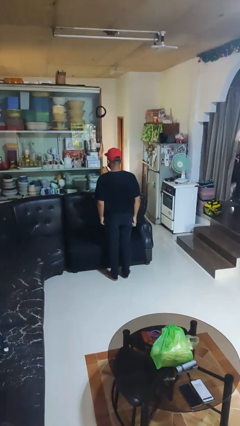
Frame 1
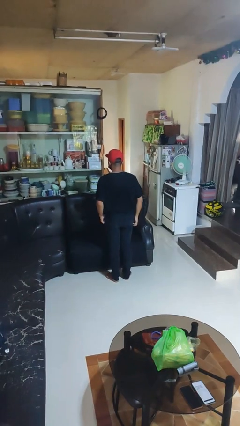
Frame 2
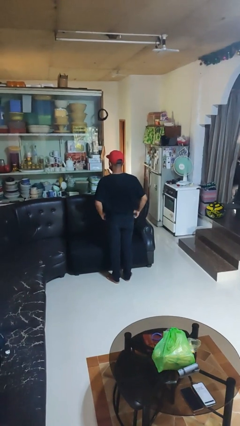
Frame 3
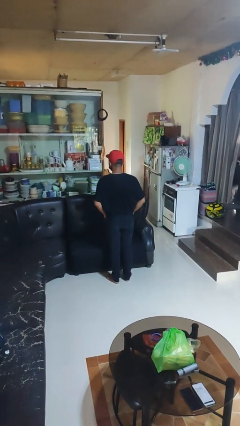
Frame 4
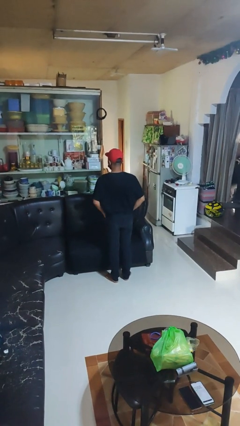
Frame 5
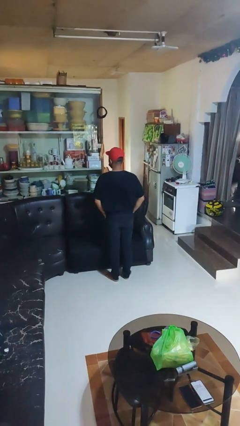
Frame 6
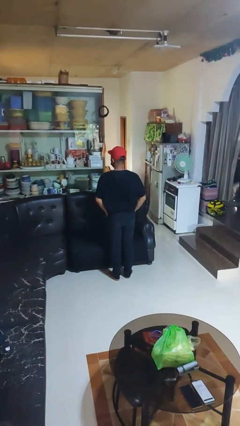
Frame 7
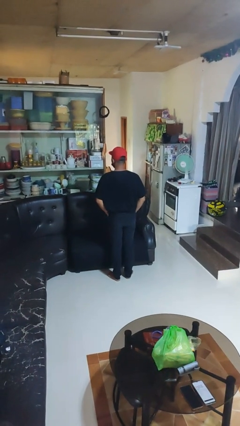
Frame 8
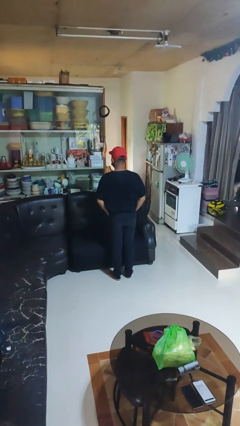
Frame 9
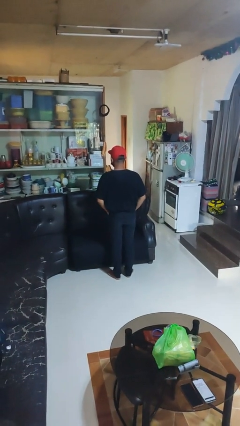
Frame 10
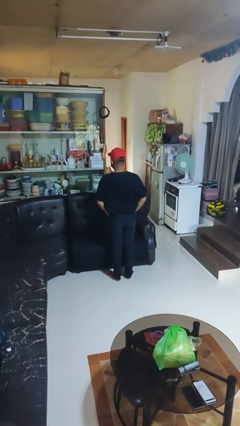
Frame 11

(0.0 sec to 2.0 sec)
person puts hands in back pockets

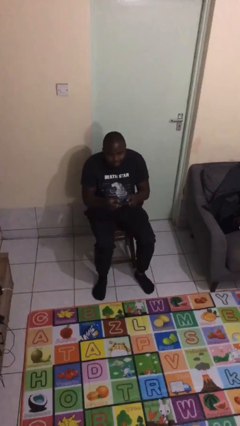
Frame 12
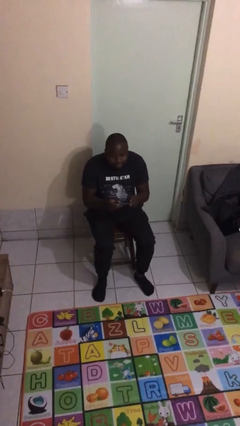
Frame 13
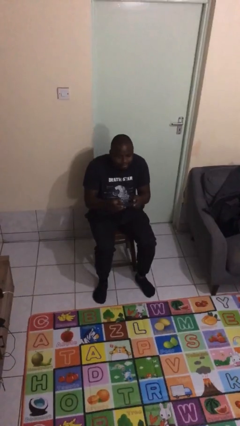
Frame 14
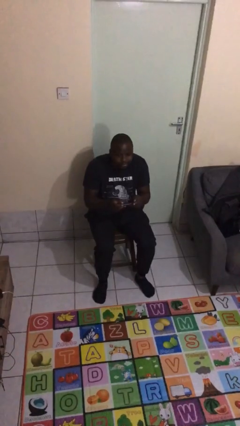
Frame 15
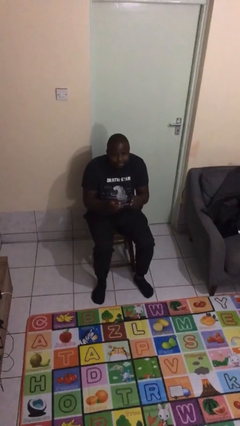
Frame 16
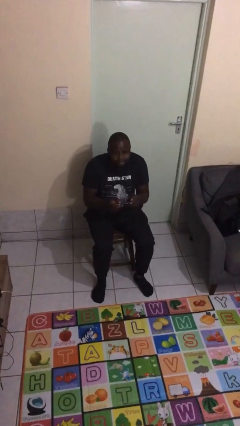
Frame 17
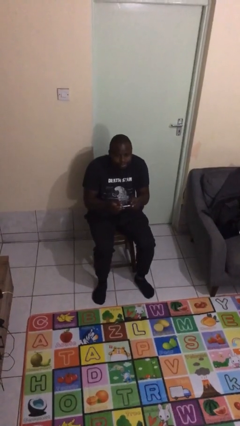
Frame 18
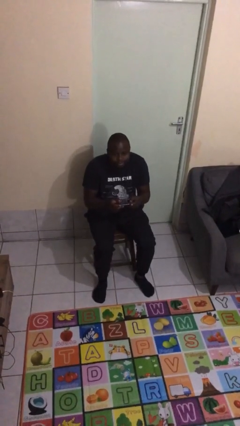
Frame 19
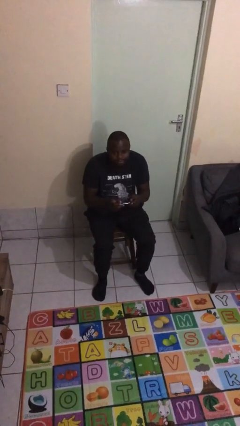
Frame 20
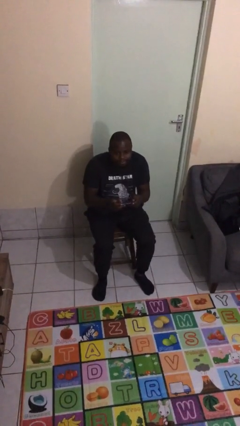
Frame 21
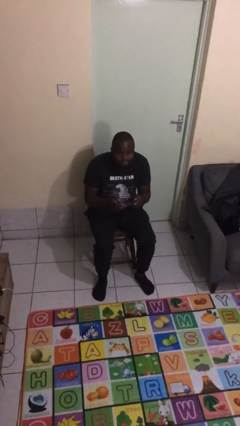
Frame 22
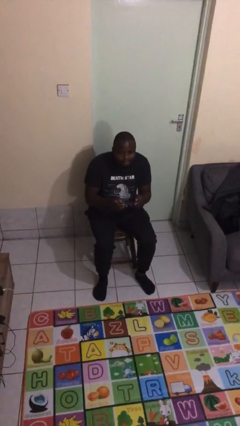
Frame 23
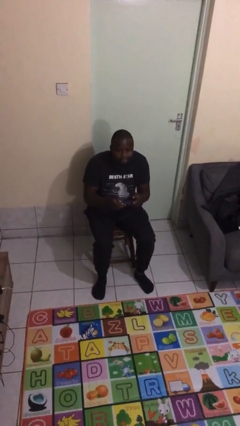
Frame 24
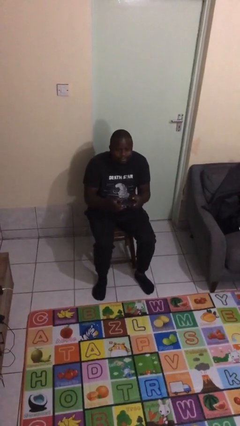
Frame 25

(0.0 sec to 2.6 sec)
person interacts with handheld game

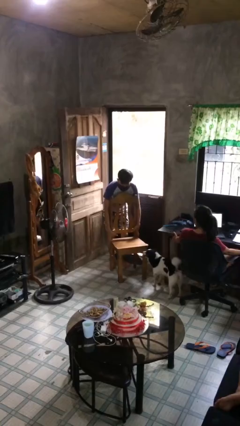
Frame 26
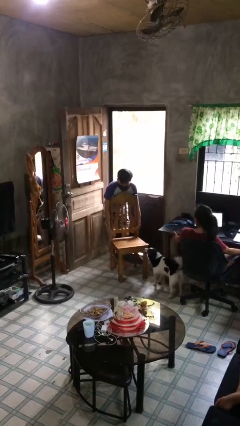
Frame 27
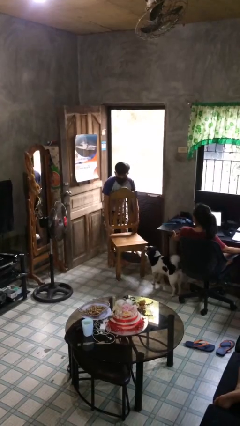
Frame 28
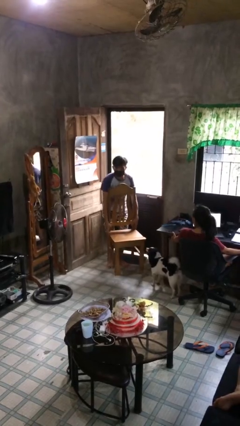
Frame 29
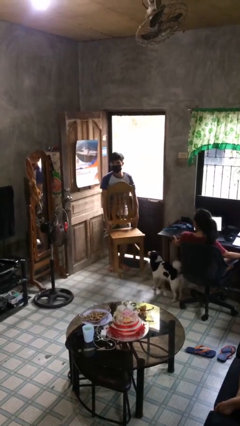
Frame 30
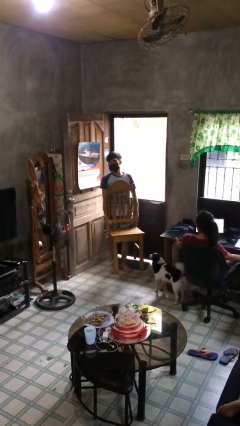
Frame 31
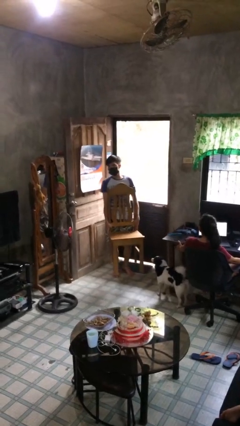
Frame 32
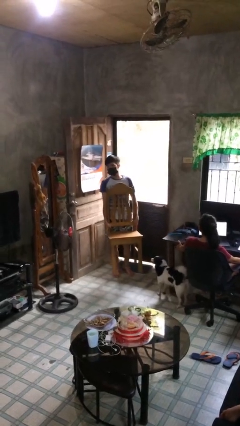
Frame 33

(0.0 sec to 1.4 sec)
person picks up object from floor

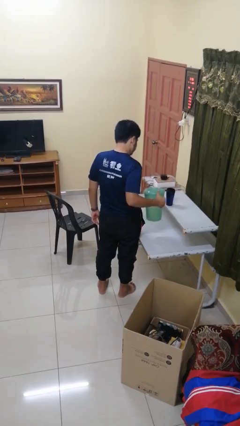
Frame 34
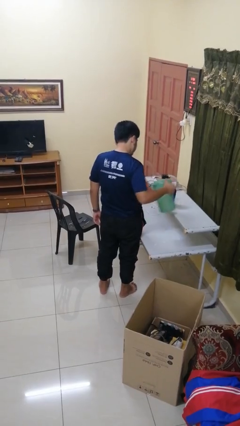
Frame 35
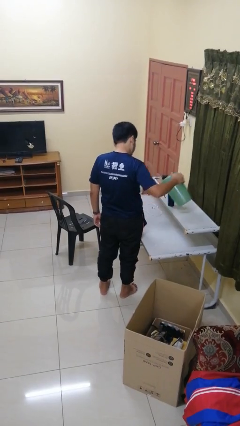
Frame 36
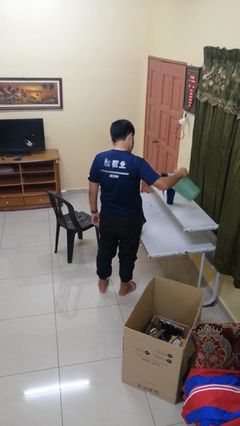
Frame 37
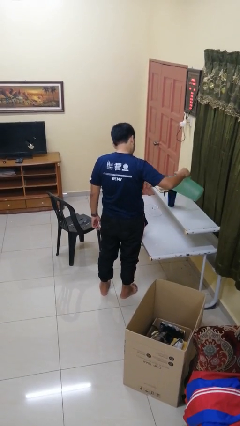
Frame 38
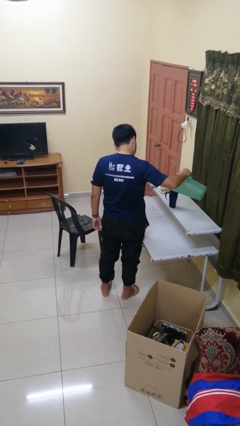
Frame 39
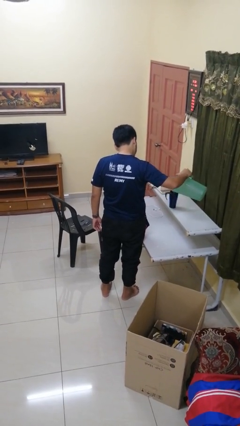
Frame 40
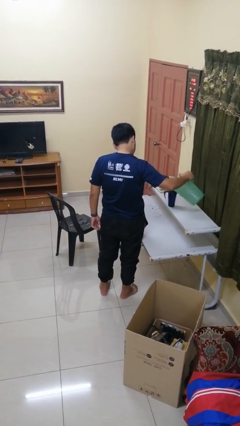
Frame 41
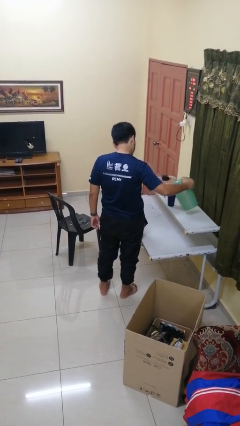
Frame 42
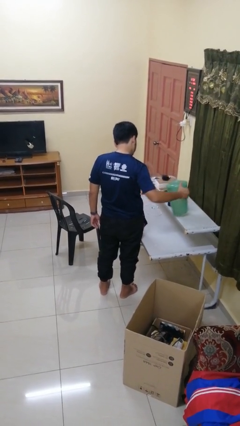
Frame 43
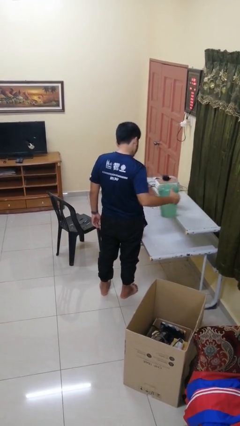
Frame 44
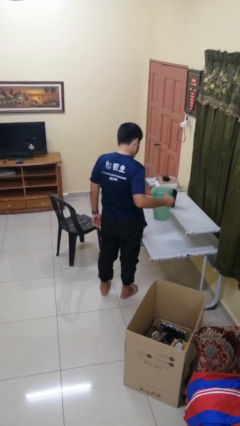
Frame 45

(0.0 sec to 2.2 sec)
person pours coffee into mug

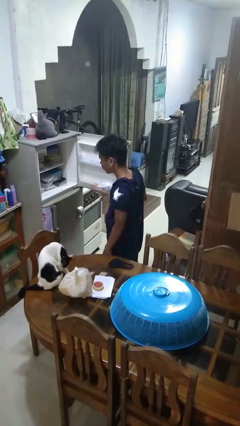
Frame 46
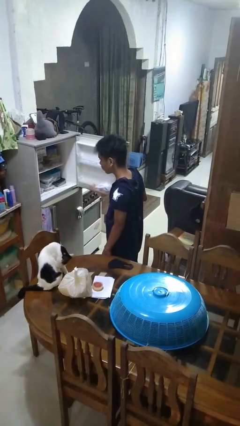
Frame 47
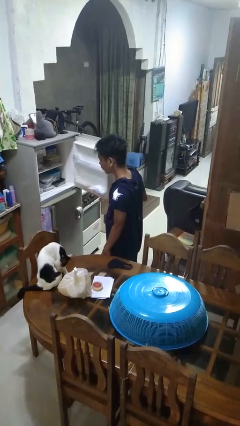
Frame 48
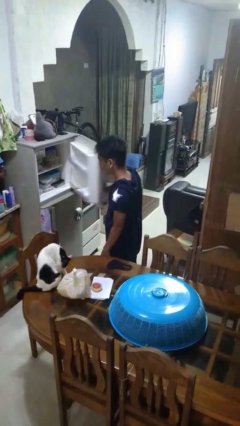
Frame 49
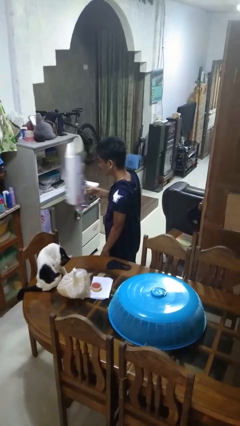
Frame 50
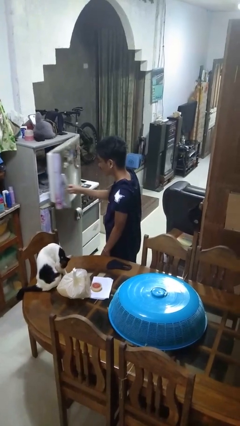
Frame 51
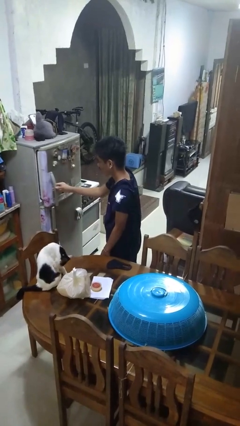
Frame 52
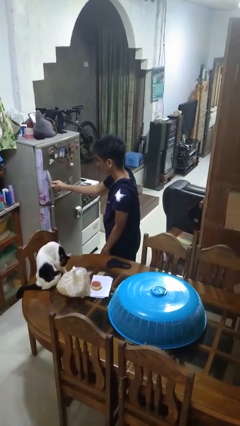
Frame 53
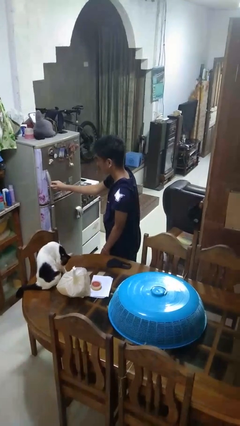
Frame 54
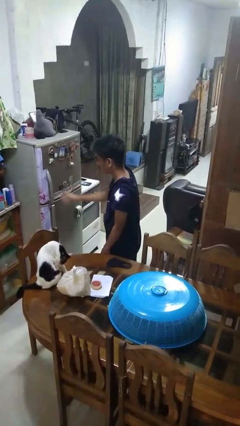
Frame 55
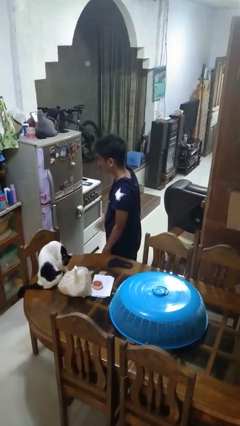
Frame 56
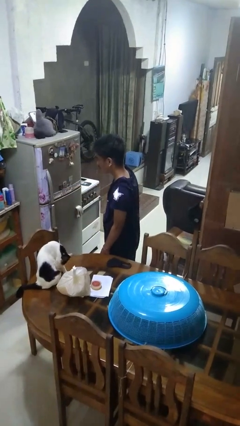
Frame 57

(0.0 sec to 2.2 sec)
person closes refrigerator

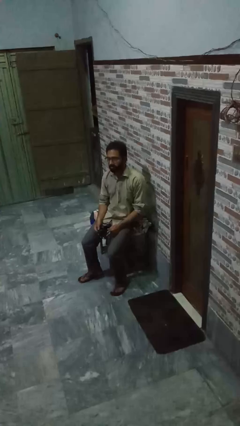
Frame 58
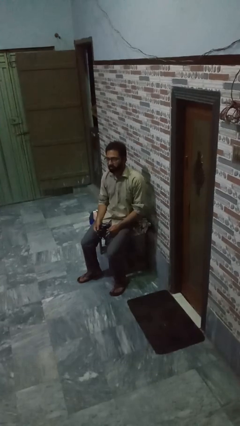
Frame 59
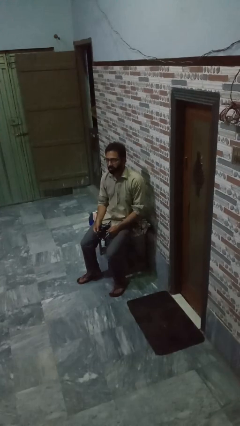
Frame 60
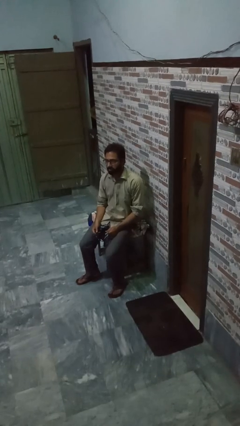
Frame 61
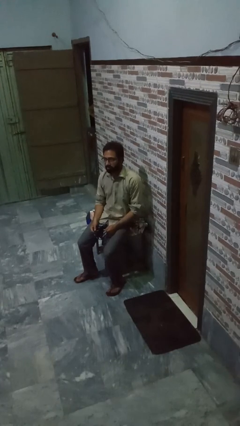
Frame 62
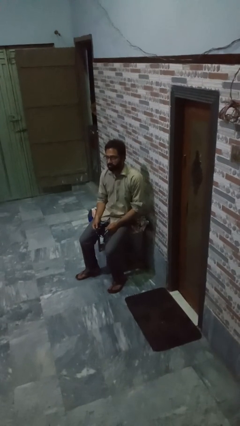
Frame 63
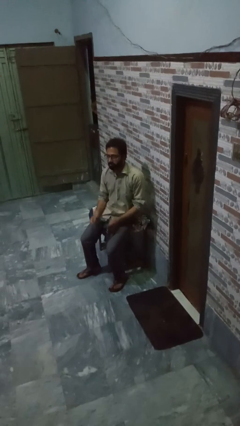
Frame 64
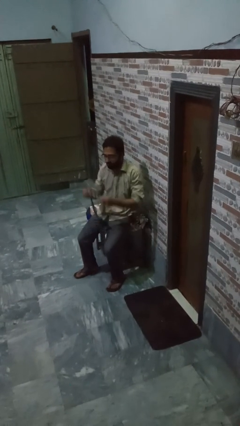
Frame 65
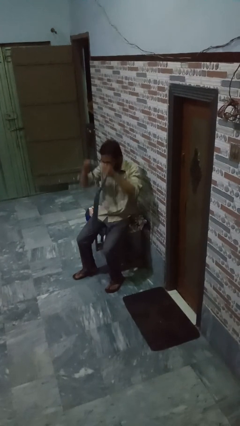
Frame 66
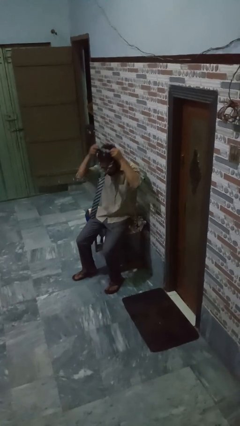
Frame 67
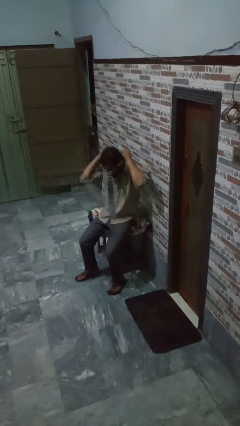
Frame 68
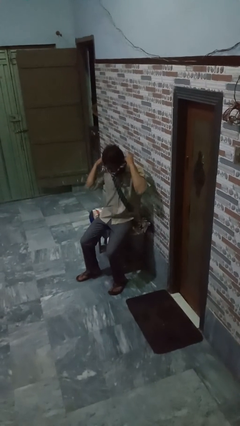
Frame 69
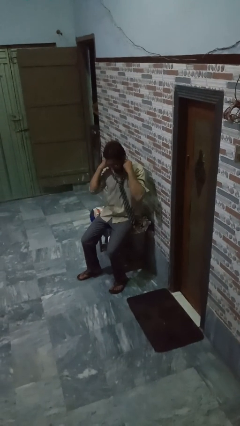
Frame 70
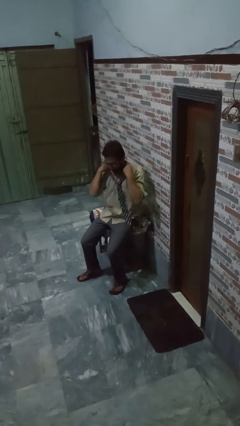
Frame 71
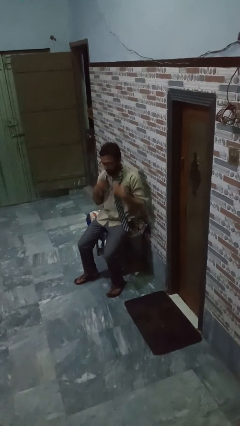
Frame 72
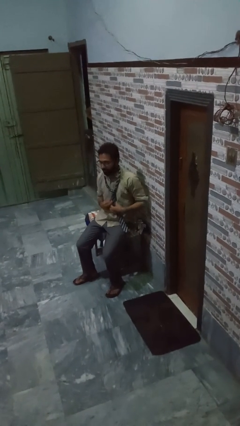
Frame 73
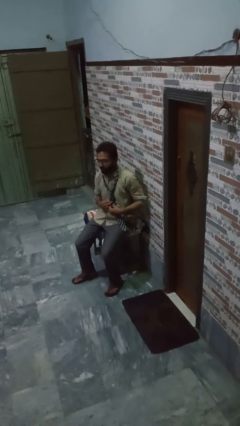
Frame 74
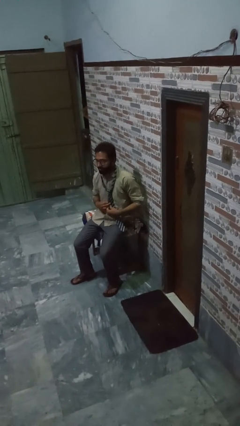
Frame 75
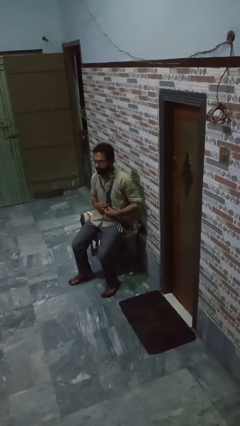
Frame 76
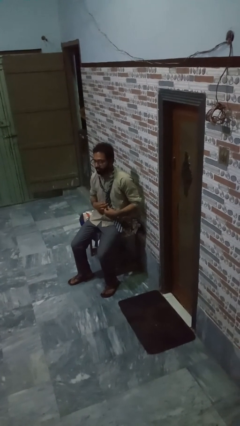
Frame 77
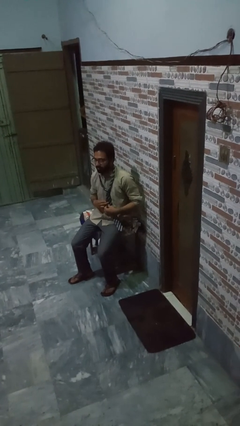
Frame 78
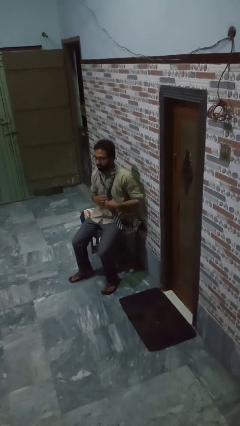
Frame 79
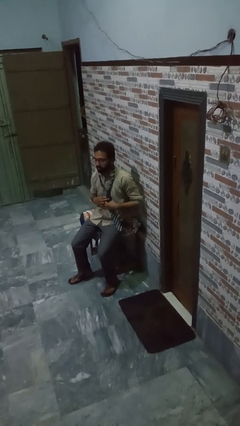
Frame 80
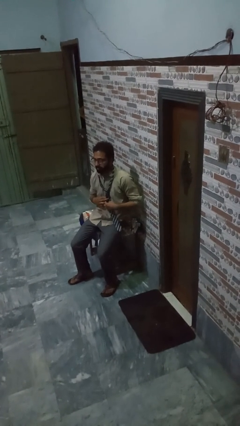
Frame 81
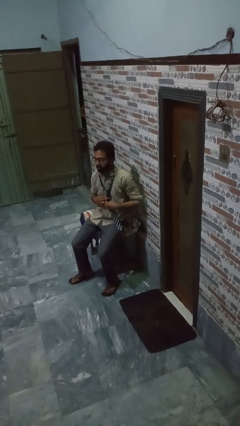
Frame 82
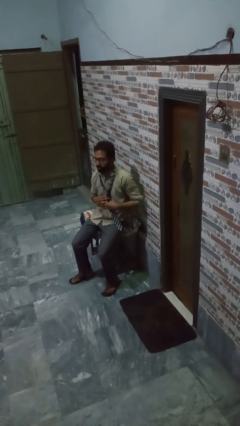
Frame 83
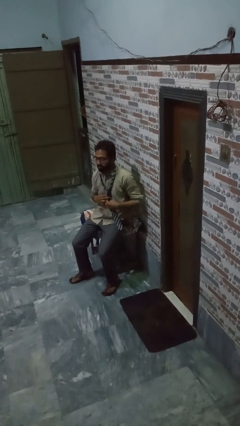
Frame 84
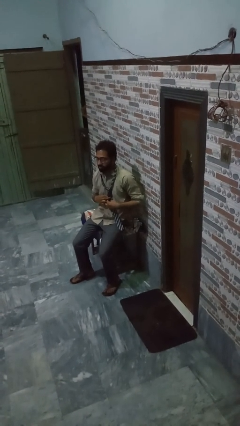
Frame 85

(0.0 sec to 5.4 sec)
person puts on necktie

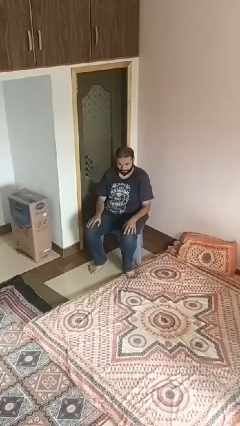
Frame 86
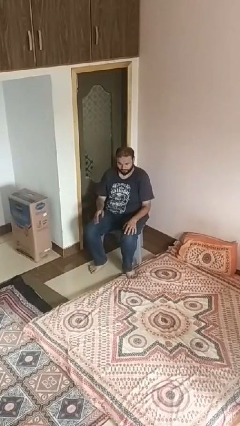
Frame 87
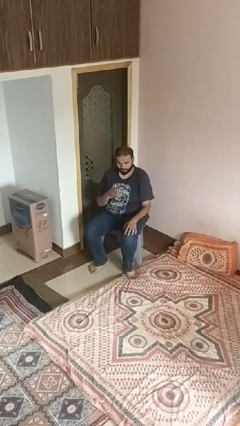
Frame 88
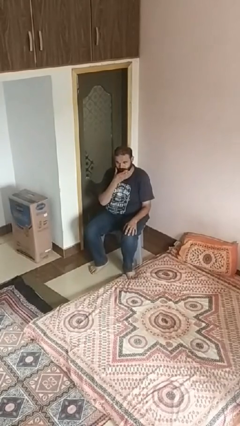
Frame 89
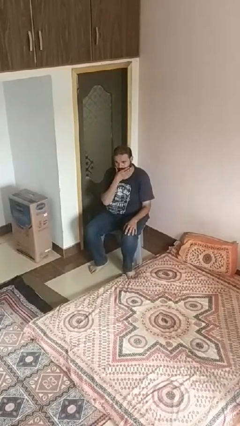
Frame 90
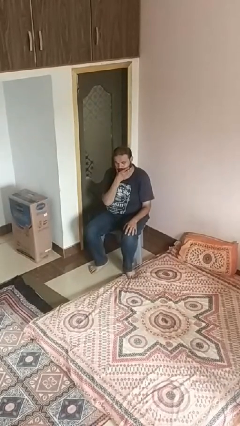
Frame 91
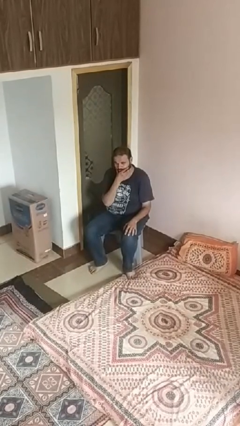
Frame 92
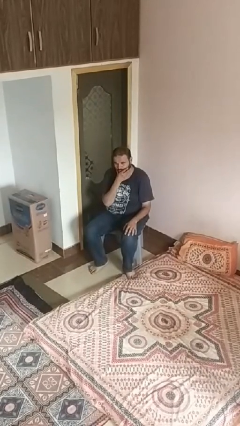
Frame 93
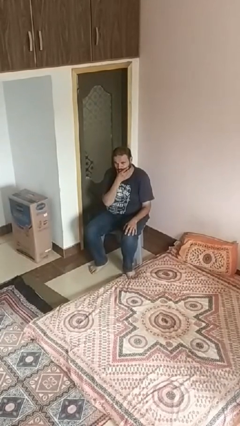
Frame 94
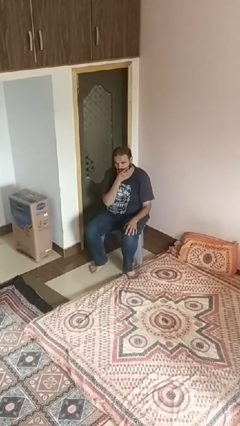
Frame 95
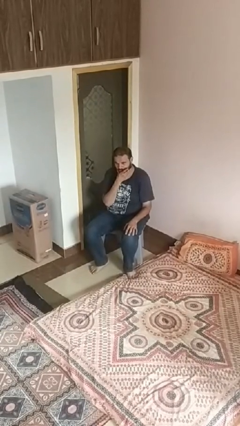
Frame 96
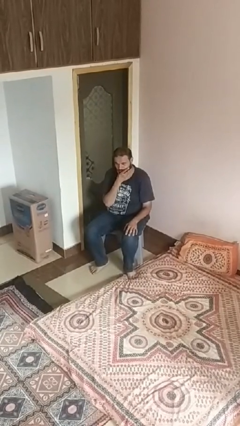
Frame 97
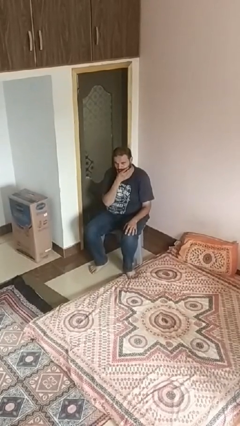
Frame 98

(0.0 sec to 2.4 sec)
person strokes chin
